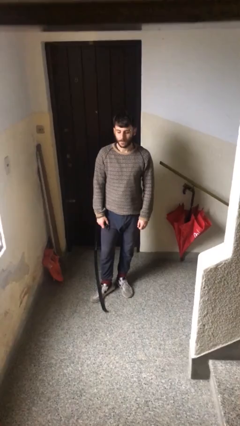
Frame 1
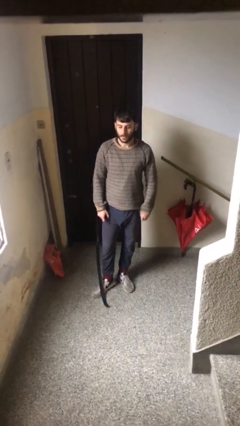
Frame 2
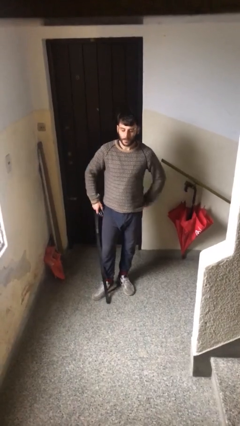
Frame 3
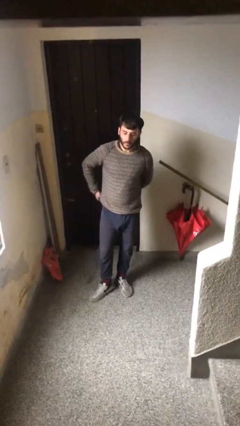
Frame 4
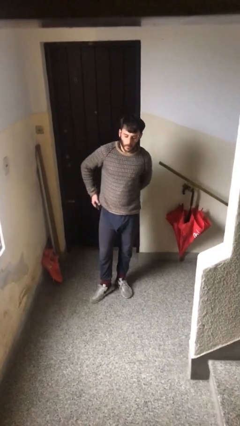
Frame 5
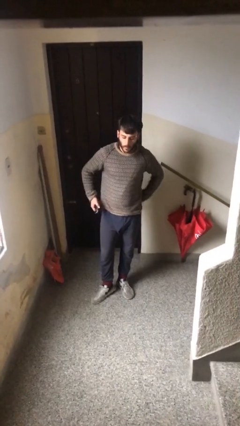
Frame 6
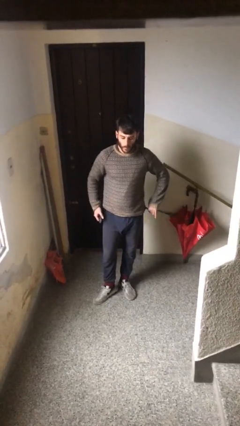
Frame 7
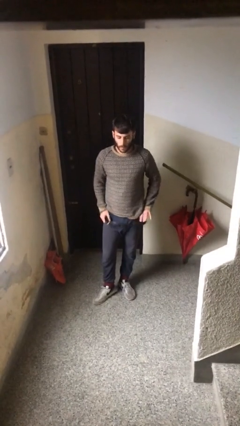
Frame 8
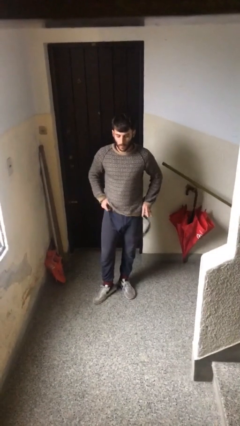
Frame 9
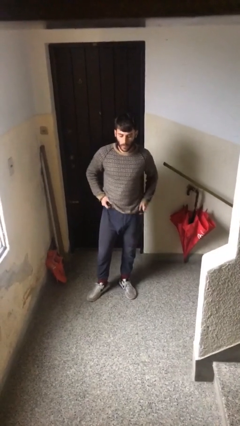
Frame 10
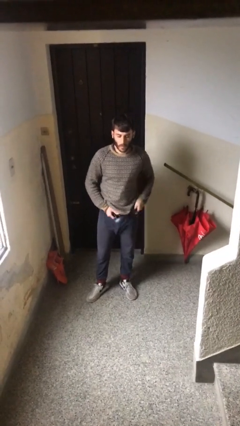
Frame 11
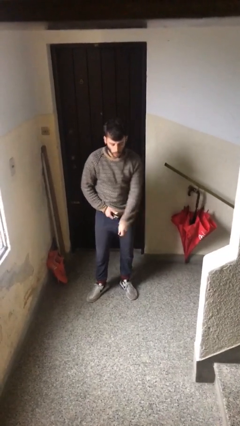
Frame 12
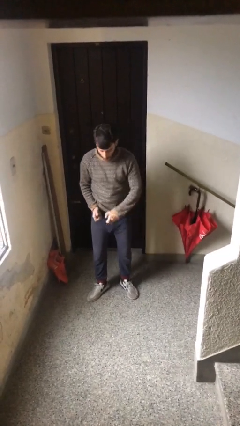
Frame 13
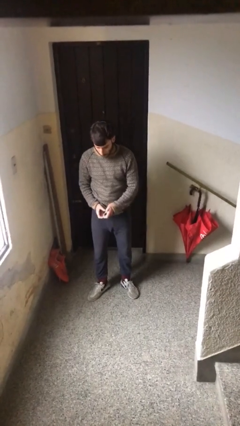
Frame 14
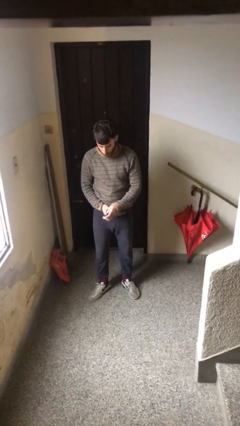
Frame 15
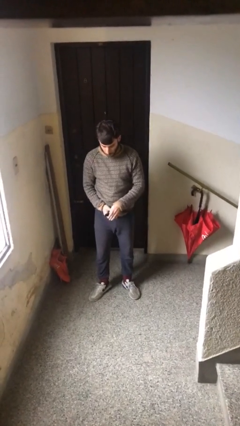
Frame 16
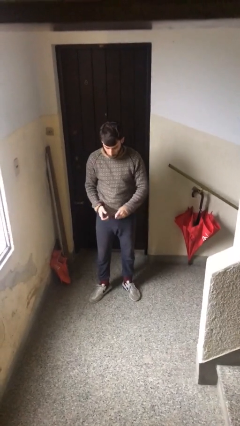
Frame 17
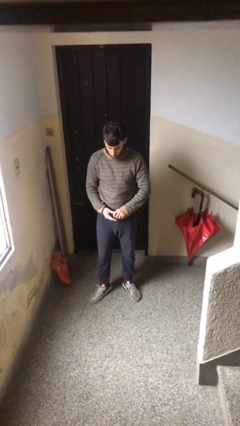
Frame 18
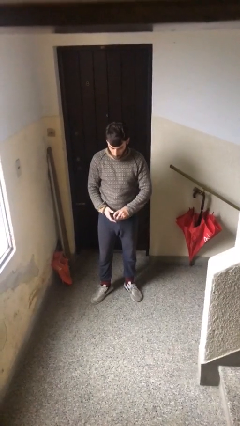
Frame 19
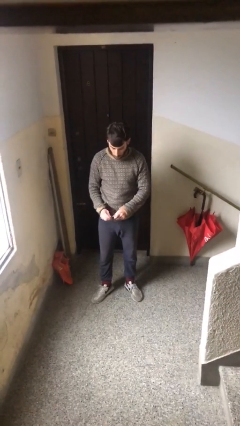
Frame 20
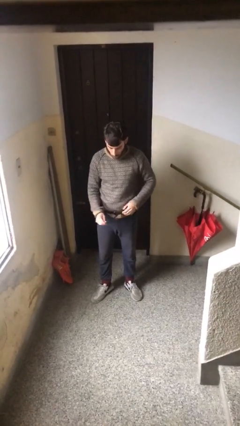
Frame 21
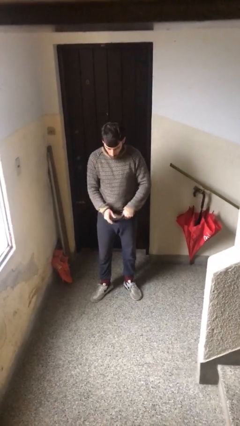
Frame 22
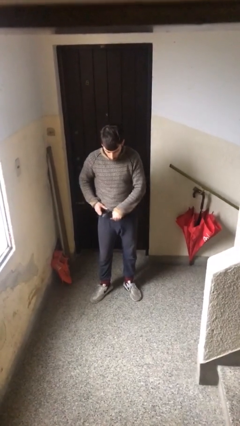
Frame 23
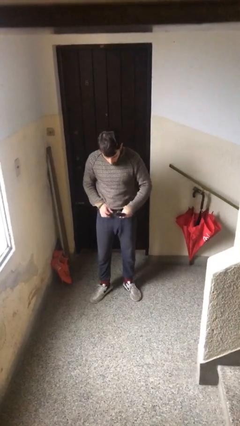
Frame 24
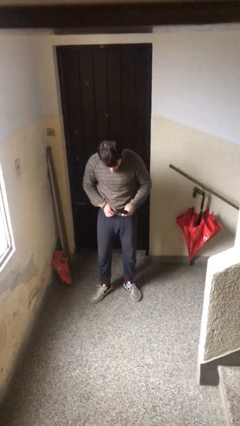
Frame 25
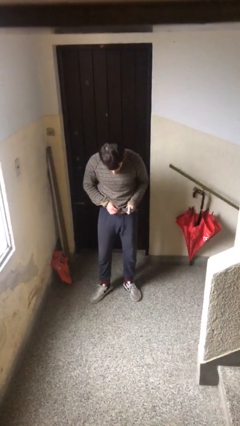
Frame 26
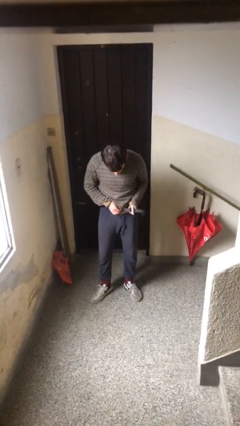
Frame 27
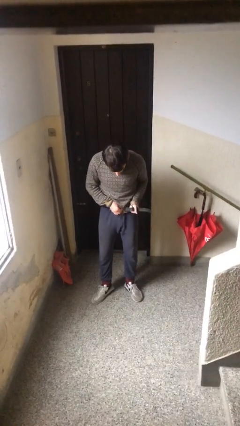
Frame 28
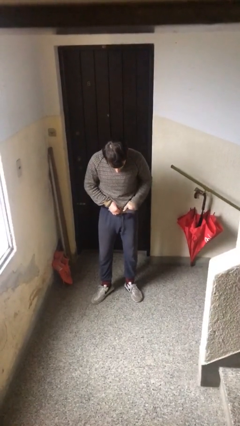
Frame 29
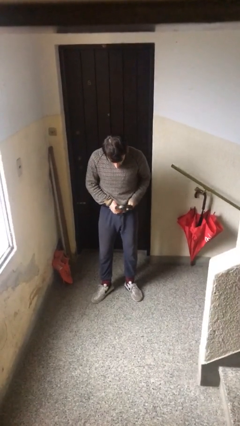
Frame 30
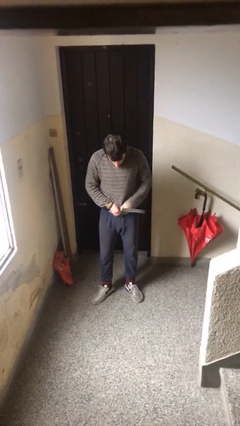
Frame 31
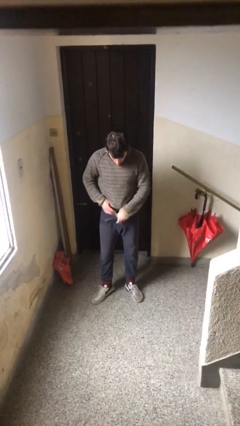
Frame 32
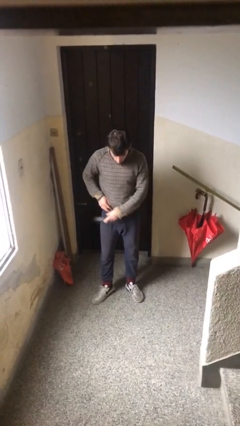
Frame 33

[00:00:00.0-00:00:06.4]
person puts on belt

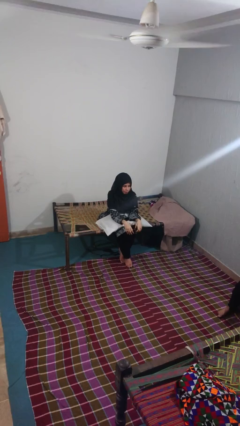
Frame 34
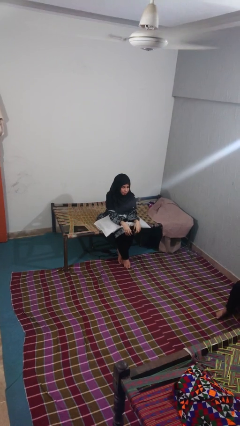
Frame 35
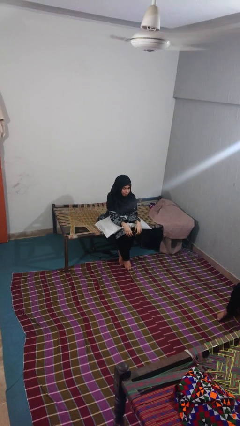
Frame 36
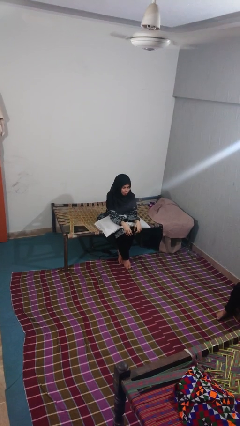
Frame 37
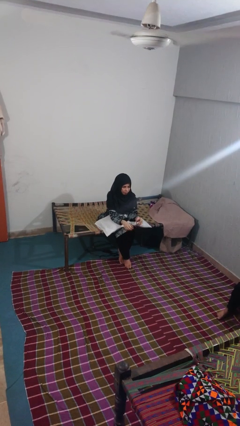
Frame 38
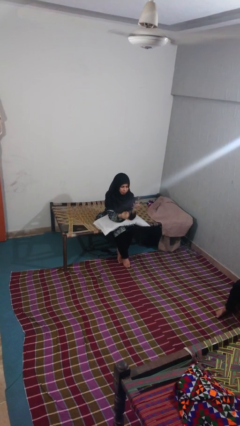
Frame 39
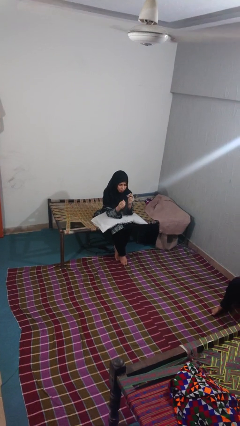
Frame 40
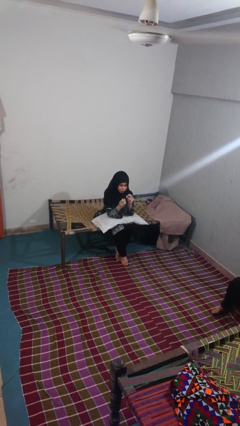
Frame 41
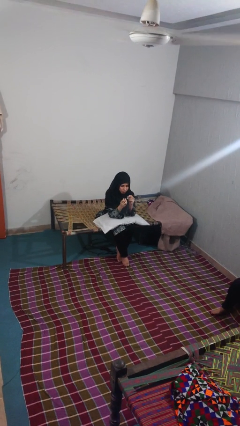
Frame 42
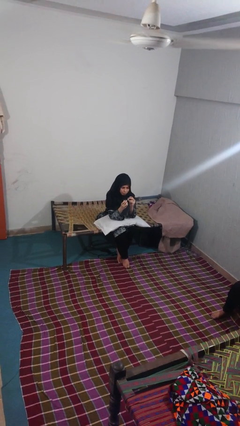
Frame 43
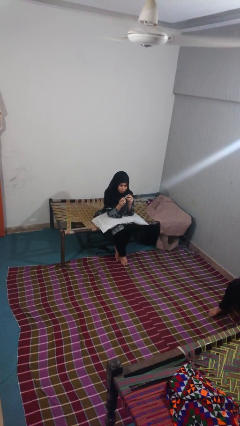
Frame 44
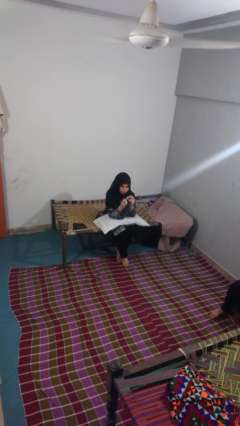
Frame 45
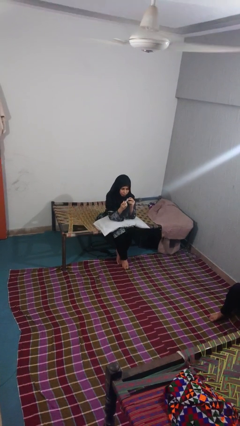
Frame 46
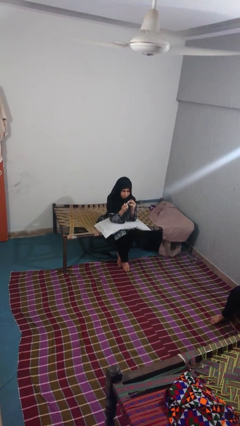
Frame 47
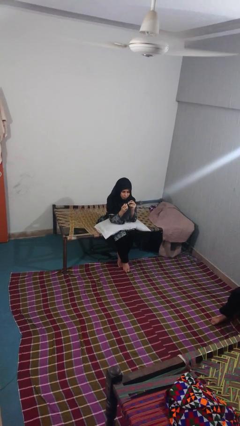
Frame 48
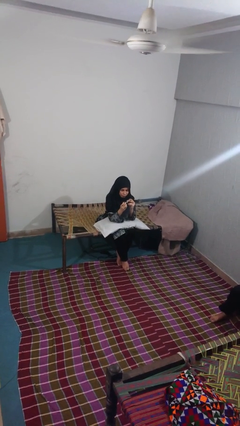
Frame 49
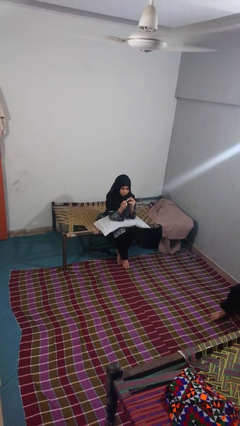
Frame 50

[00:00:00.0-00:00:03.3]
person clips fingernails

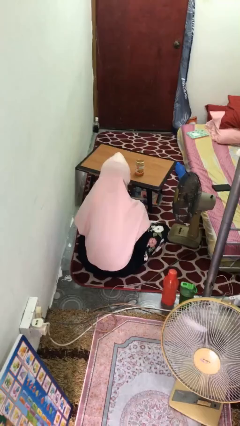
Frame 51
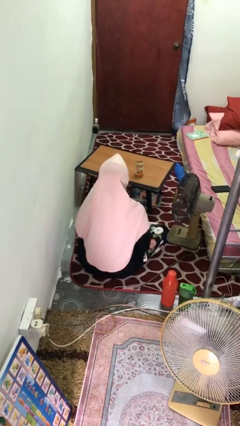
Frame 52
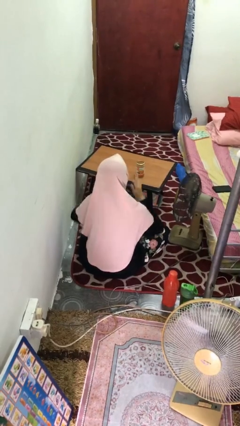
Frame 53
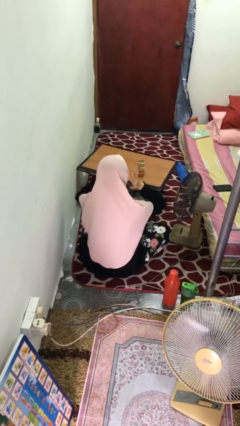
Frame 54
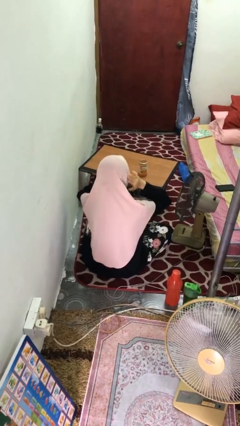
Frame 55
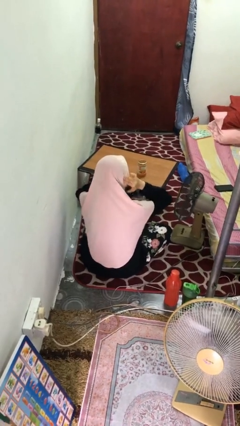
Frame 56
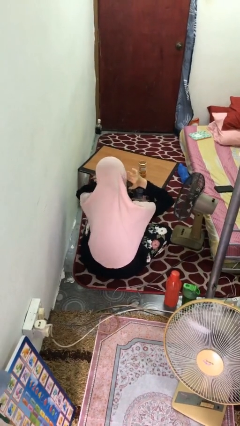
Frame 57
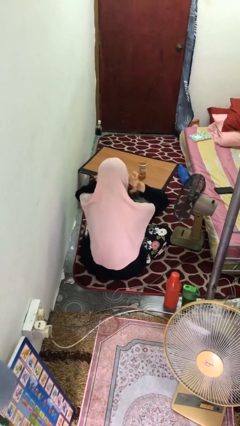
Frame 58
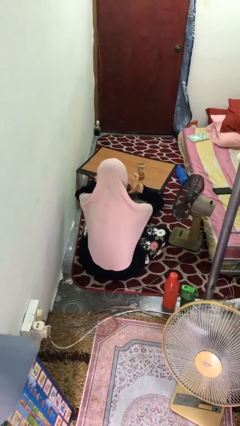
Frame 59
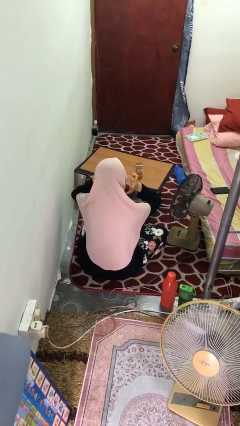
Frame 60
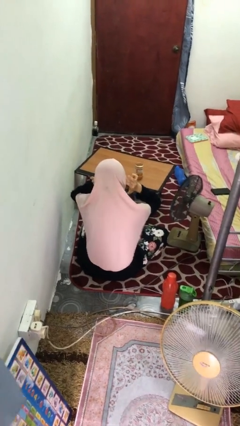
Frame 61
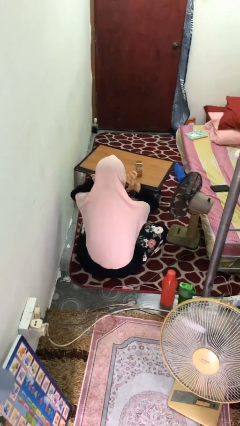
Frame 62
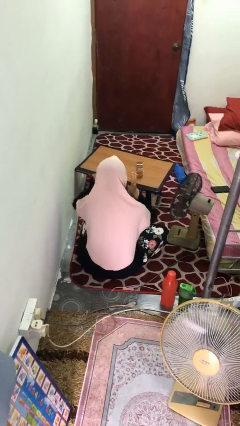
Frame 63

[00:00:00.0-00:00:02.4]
person puts fingers in ear

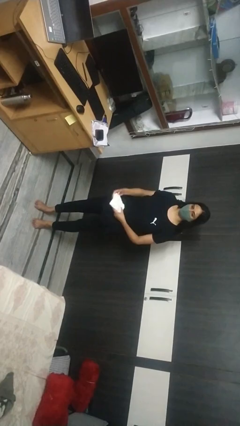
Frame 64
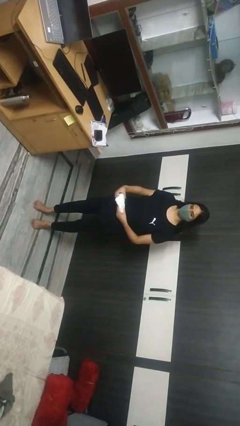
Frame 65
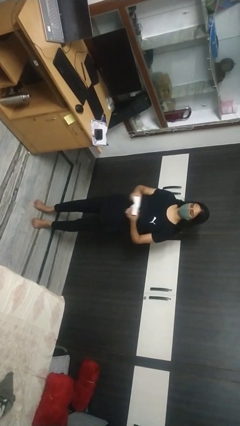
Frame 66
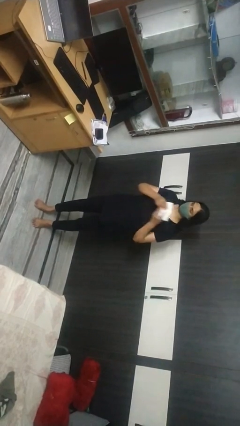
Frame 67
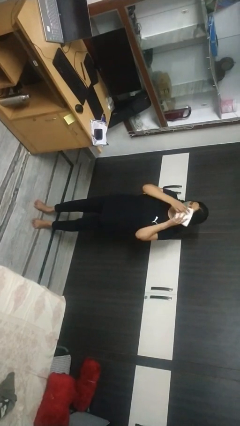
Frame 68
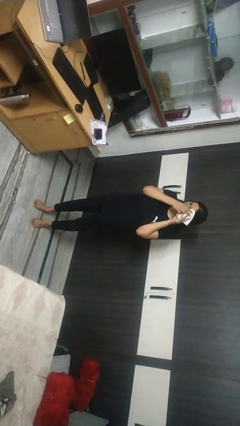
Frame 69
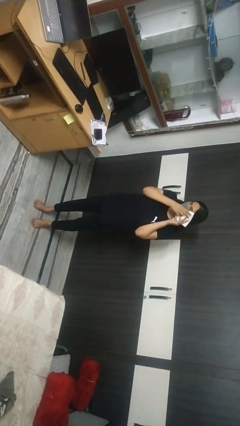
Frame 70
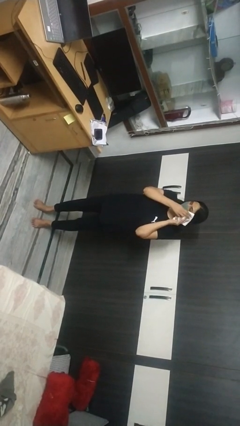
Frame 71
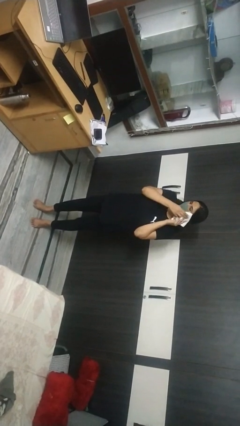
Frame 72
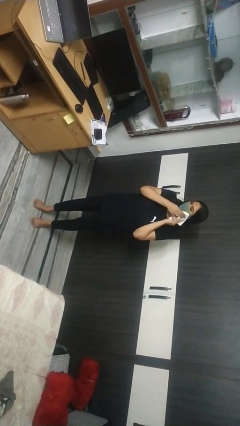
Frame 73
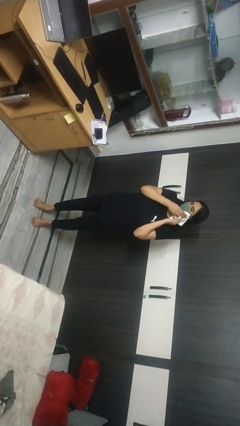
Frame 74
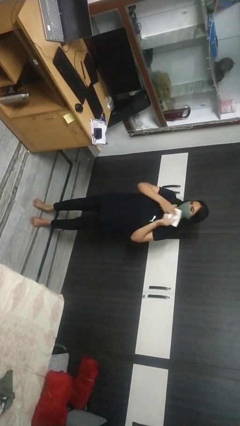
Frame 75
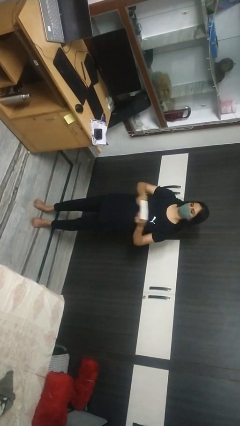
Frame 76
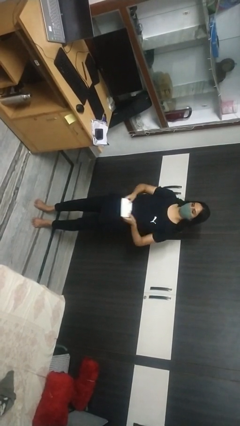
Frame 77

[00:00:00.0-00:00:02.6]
person wipes mouth with napkin

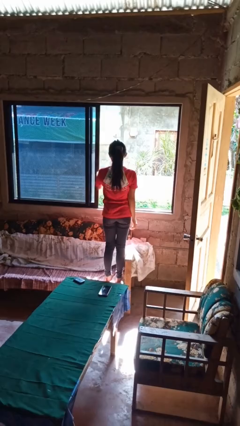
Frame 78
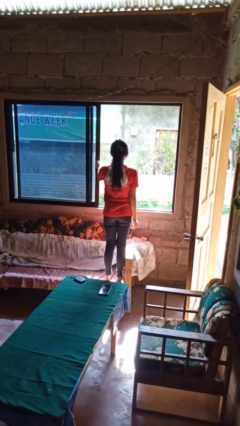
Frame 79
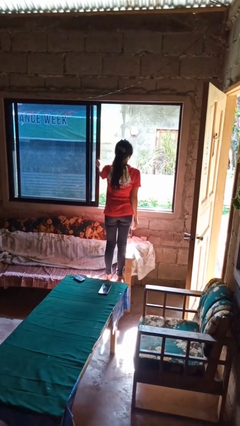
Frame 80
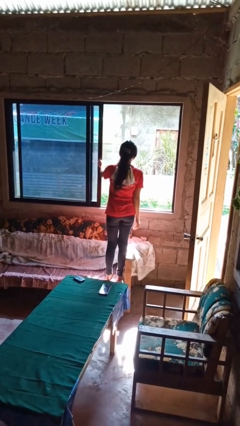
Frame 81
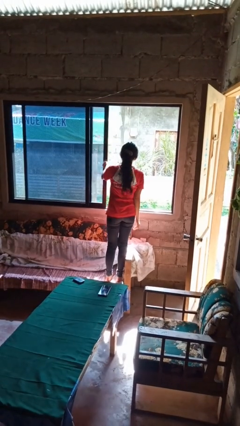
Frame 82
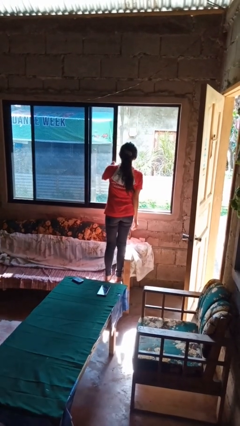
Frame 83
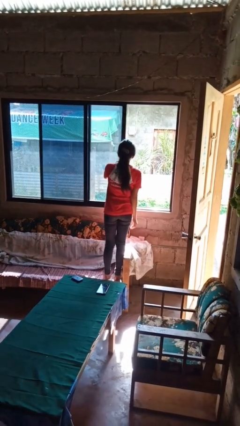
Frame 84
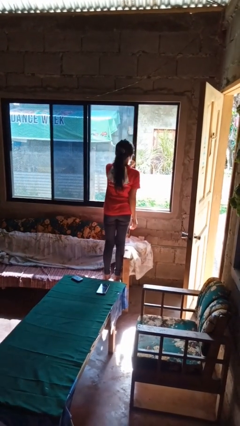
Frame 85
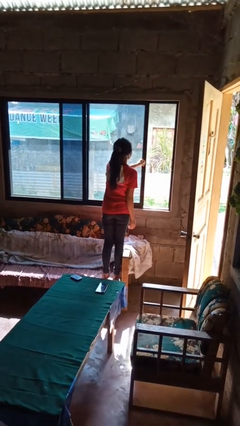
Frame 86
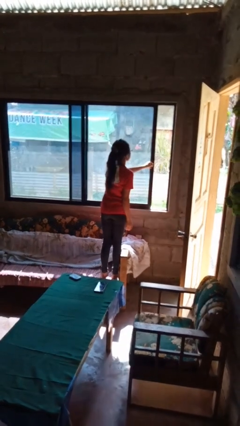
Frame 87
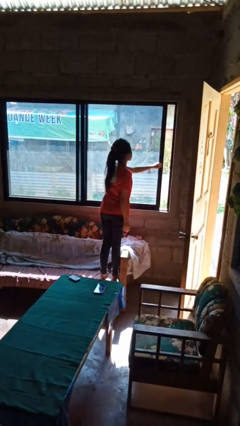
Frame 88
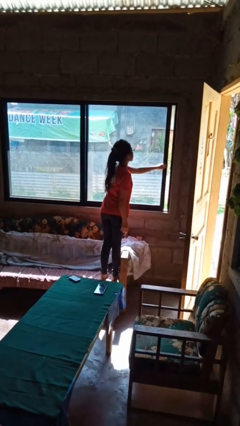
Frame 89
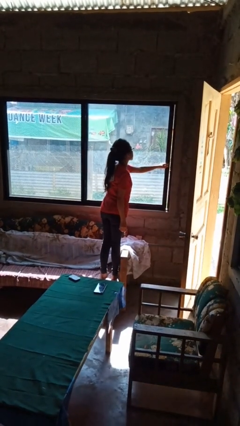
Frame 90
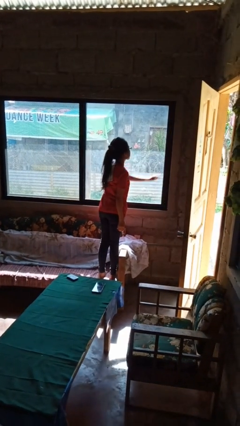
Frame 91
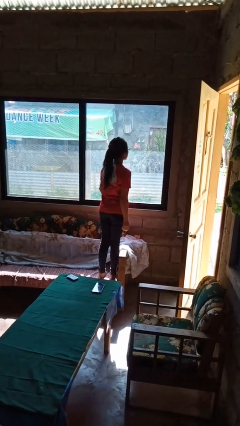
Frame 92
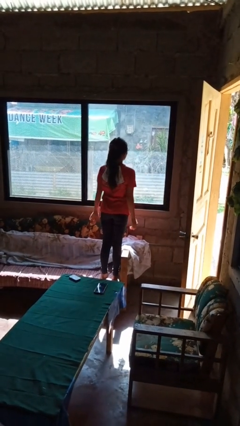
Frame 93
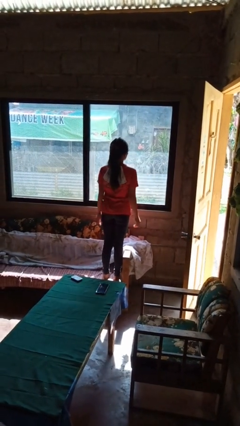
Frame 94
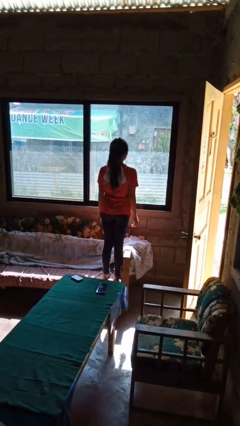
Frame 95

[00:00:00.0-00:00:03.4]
person closes home window
